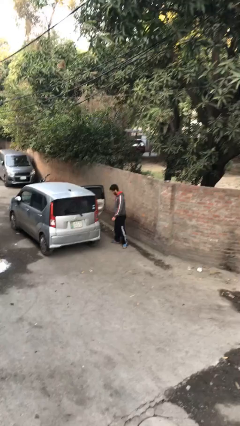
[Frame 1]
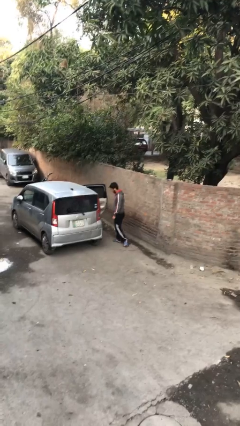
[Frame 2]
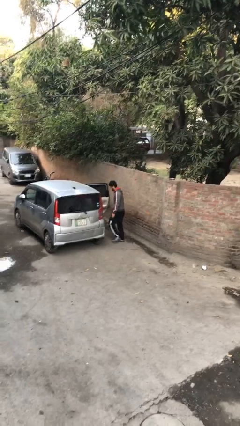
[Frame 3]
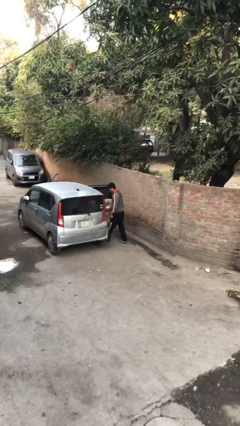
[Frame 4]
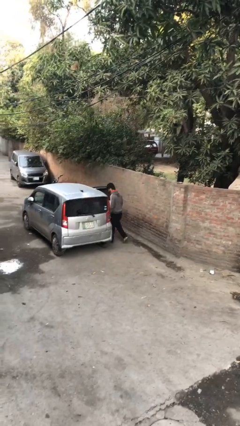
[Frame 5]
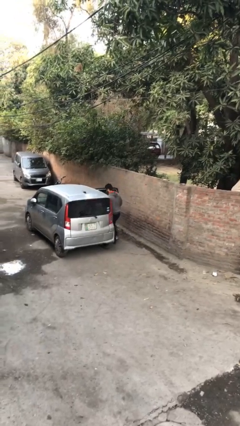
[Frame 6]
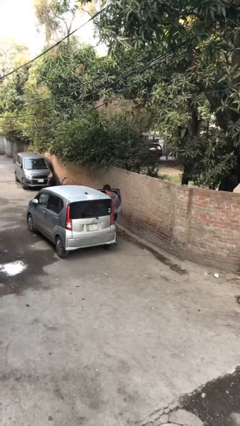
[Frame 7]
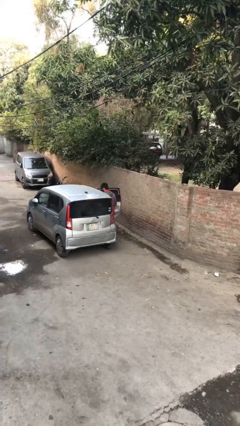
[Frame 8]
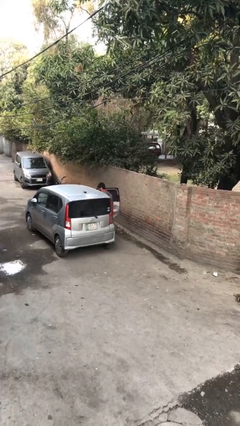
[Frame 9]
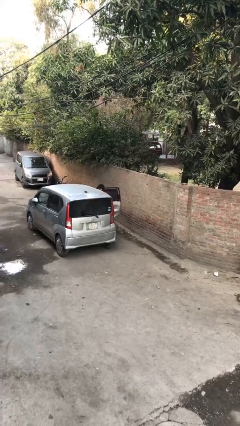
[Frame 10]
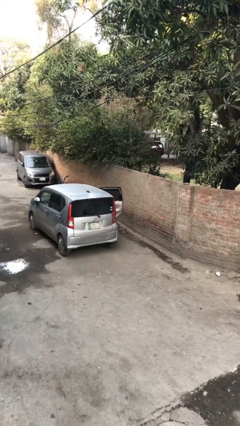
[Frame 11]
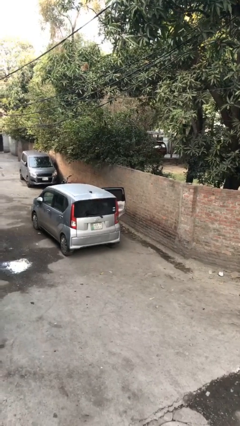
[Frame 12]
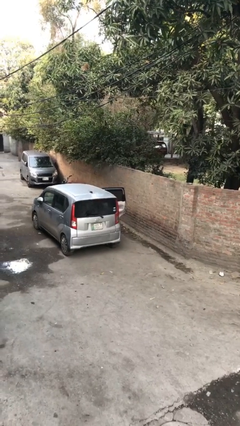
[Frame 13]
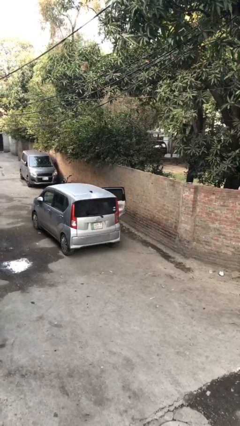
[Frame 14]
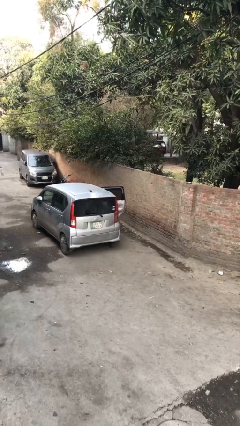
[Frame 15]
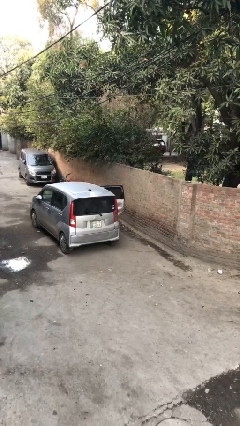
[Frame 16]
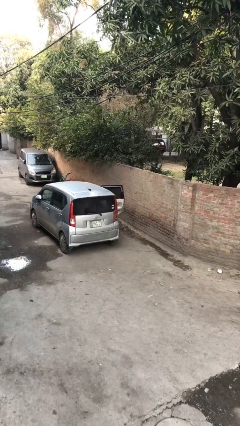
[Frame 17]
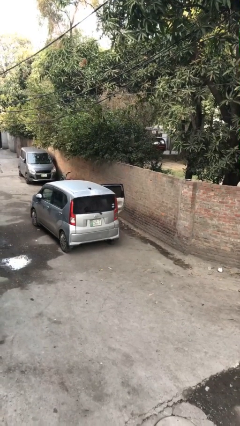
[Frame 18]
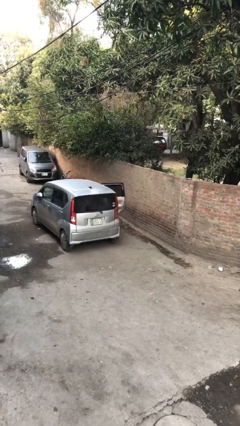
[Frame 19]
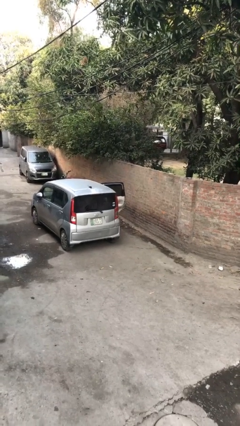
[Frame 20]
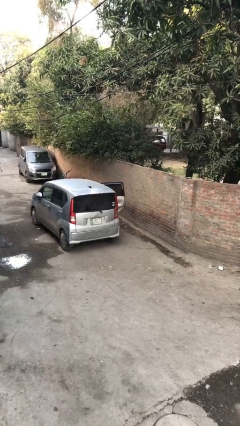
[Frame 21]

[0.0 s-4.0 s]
person enters car

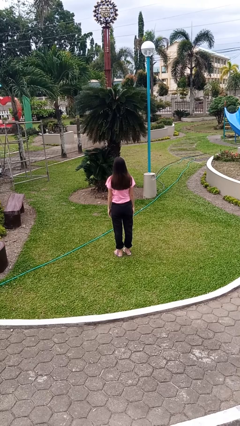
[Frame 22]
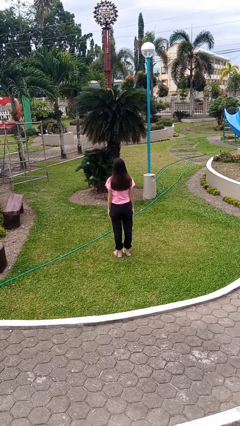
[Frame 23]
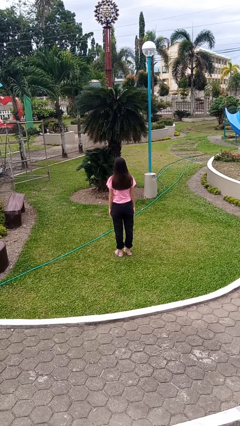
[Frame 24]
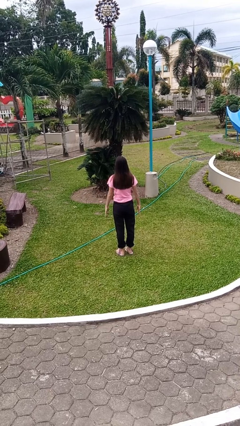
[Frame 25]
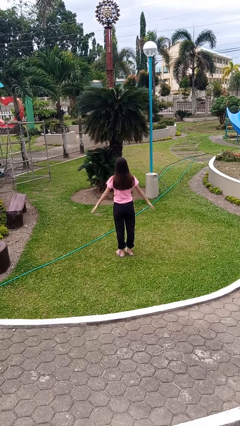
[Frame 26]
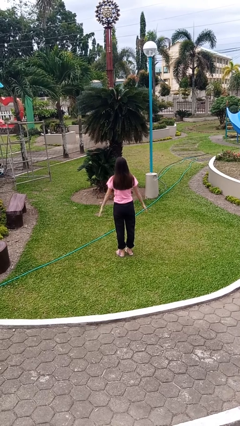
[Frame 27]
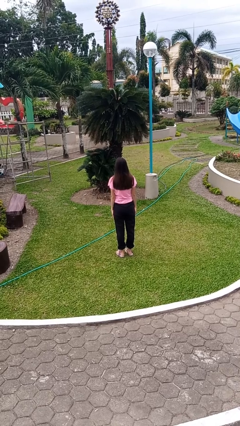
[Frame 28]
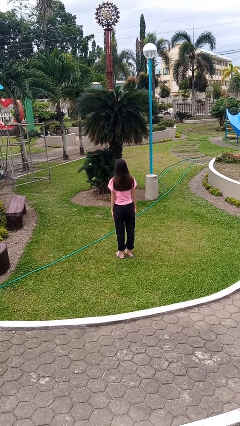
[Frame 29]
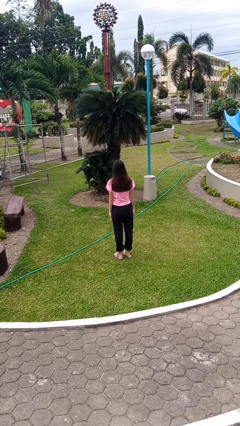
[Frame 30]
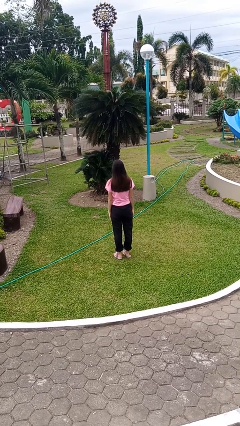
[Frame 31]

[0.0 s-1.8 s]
person slaps hands on thighs

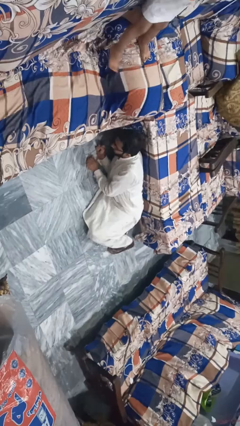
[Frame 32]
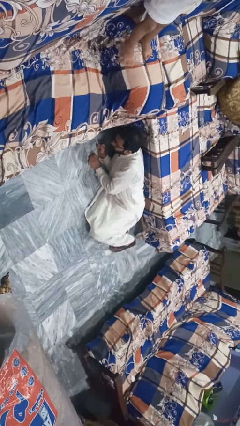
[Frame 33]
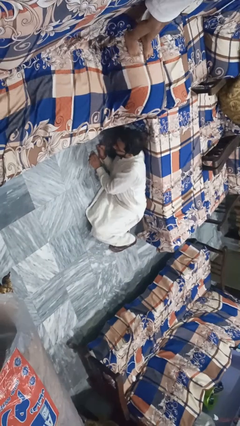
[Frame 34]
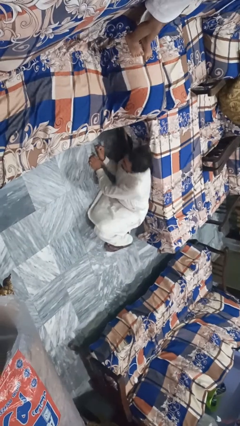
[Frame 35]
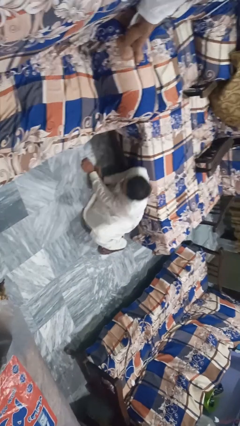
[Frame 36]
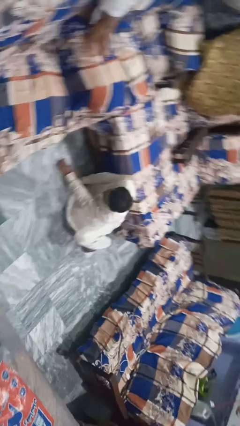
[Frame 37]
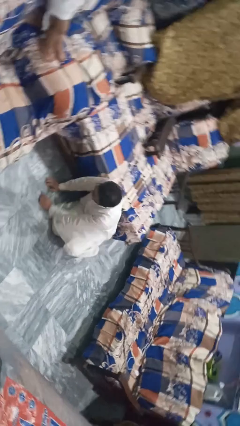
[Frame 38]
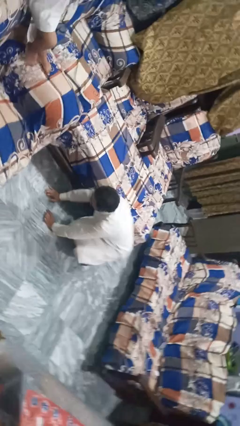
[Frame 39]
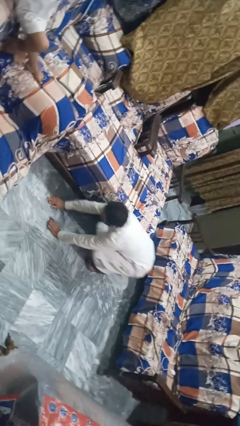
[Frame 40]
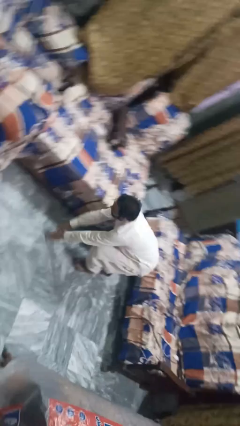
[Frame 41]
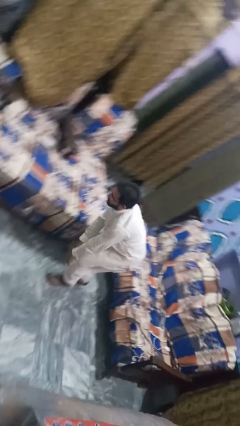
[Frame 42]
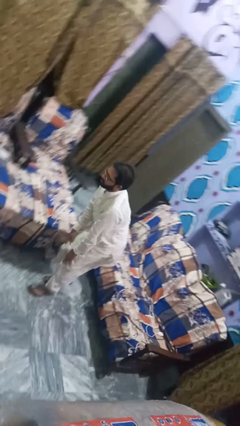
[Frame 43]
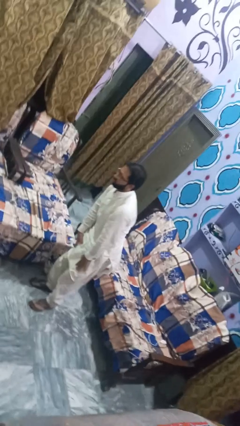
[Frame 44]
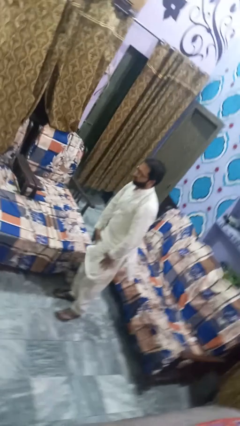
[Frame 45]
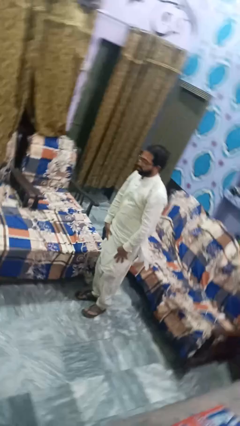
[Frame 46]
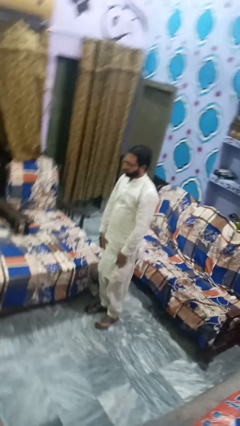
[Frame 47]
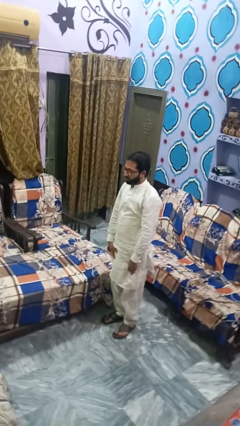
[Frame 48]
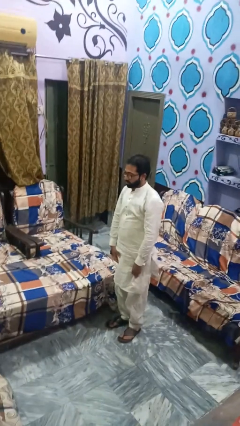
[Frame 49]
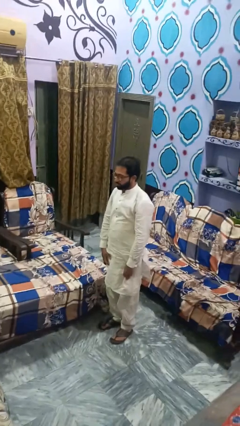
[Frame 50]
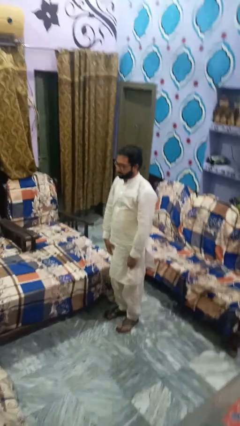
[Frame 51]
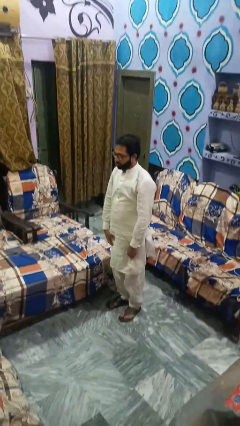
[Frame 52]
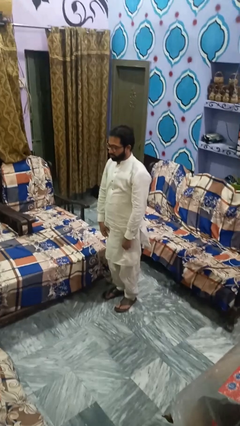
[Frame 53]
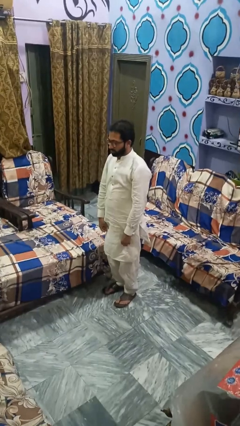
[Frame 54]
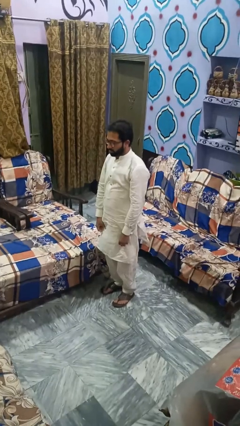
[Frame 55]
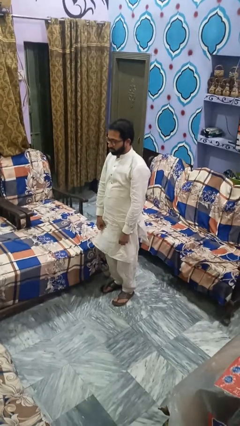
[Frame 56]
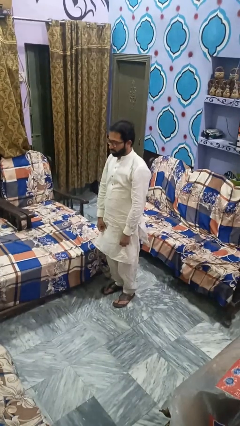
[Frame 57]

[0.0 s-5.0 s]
person stands up from floor

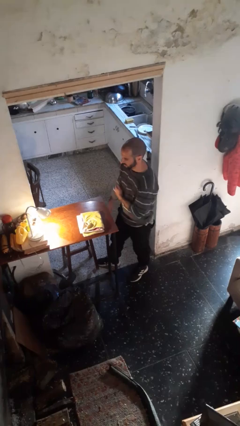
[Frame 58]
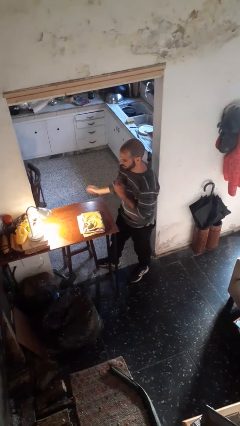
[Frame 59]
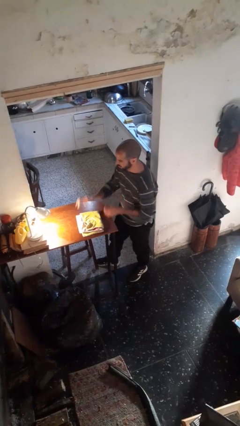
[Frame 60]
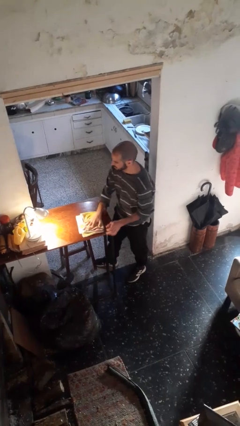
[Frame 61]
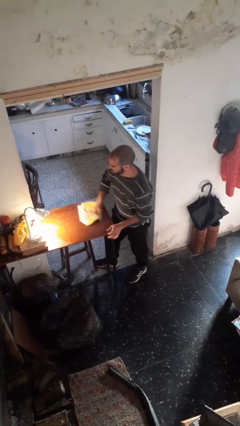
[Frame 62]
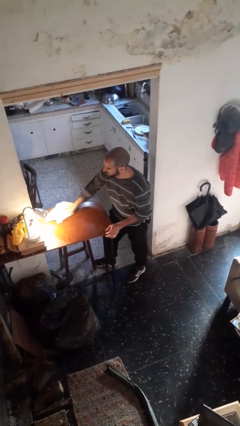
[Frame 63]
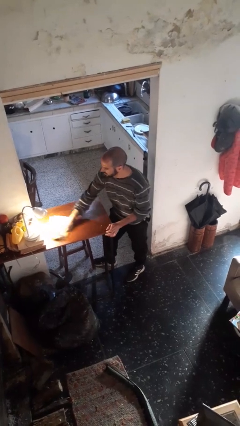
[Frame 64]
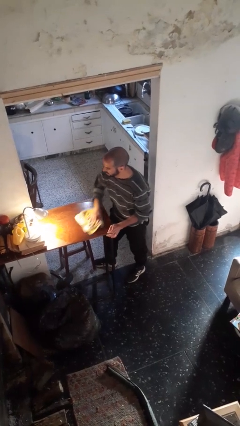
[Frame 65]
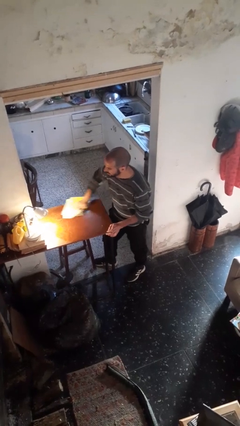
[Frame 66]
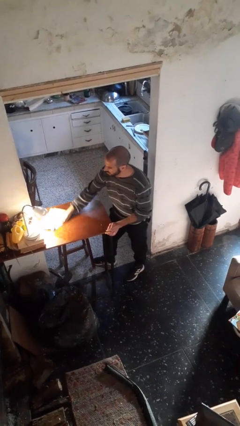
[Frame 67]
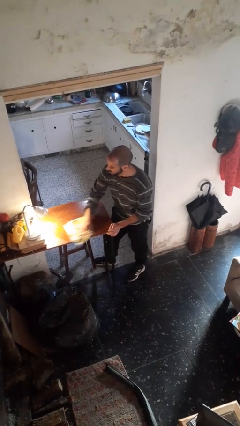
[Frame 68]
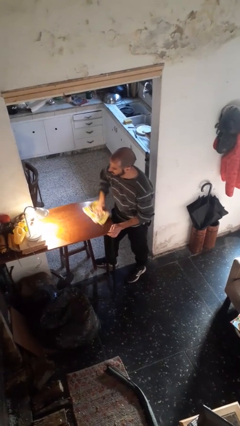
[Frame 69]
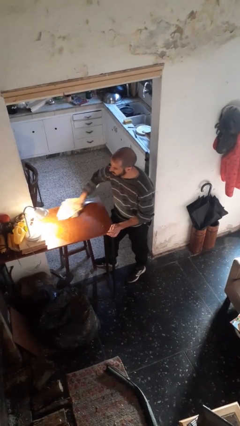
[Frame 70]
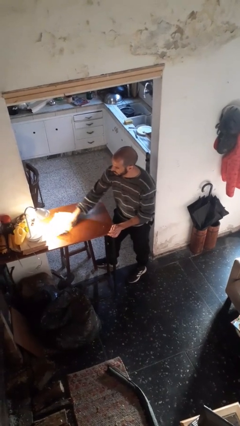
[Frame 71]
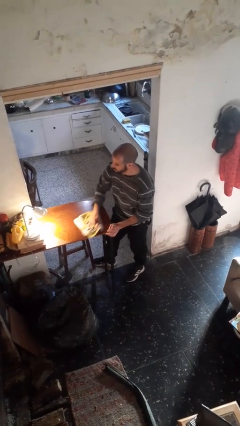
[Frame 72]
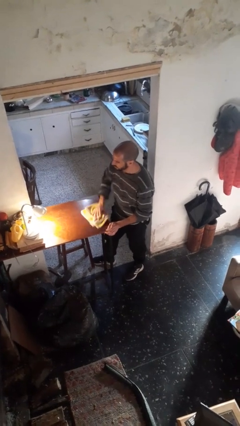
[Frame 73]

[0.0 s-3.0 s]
person cleans table with rag

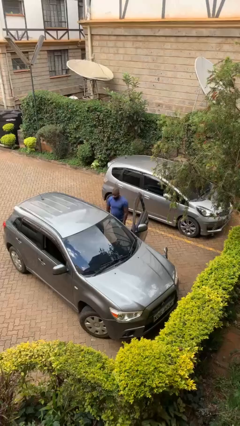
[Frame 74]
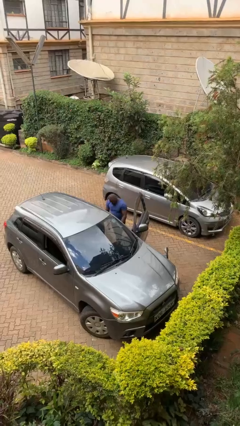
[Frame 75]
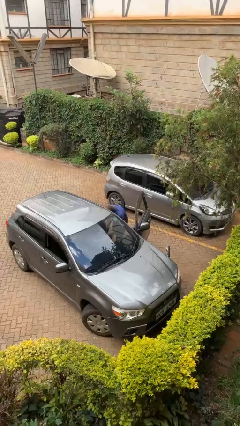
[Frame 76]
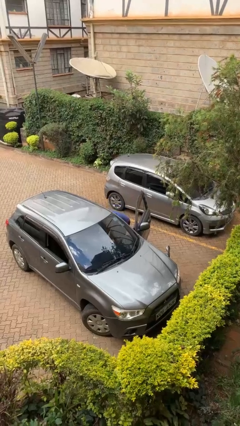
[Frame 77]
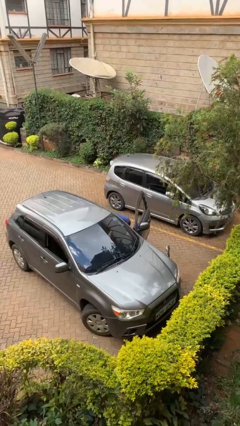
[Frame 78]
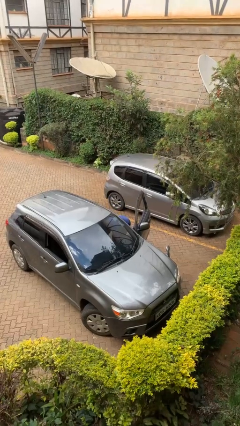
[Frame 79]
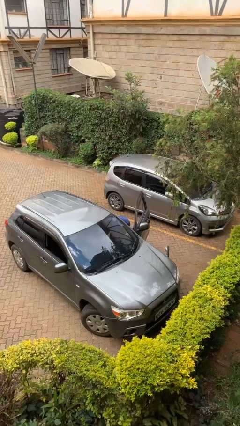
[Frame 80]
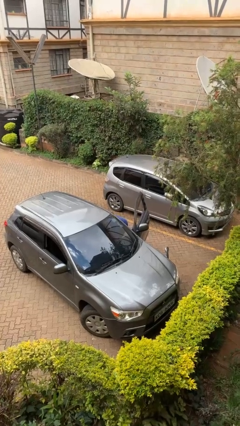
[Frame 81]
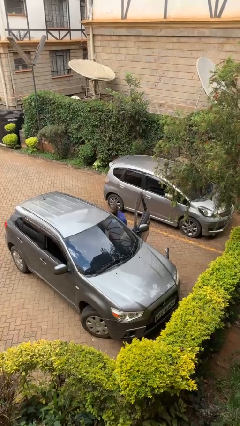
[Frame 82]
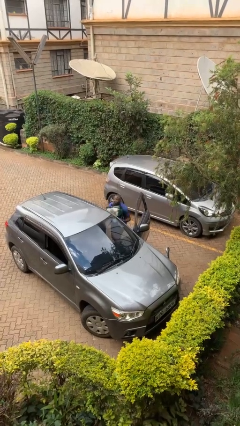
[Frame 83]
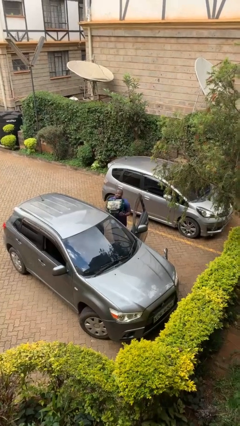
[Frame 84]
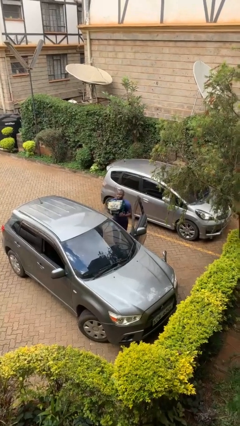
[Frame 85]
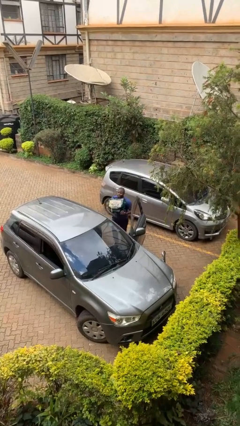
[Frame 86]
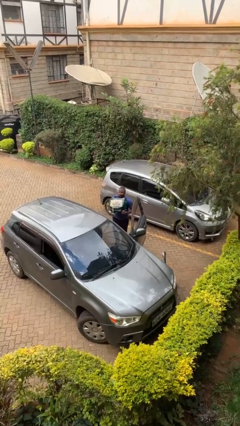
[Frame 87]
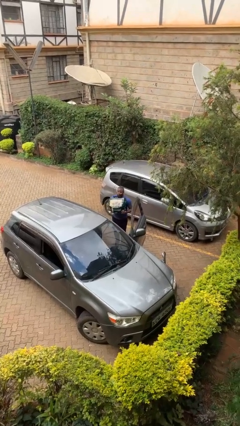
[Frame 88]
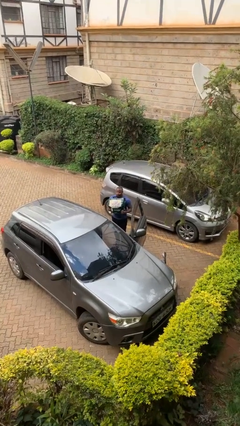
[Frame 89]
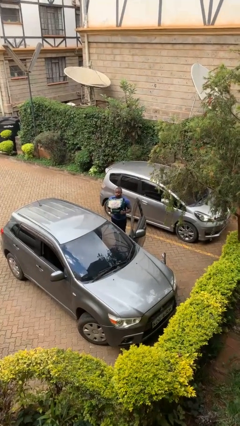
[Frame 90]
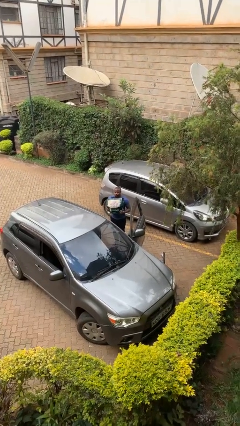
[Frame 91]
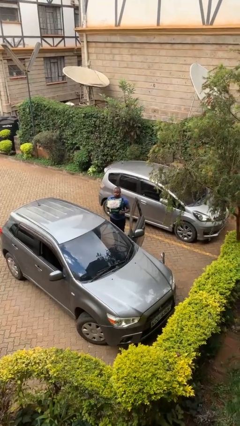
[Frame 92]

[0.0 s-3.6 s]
person unloads car

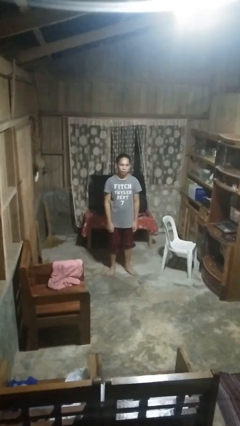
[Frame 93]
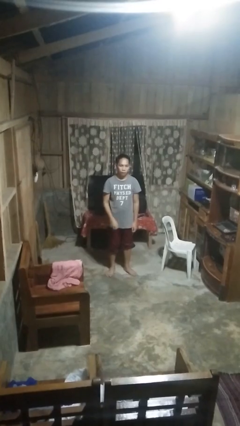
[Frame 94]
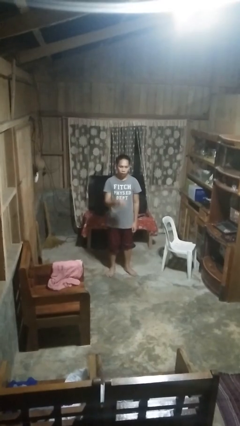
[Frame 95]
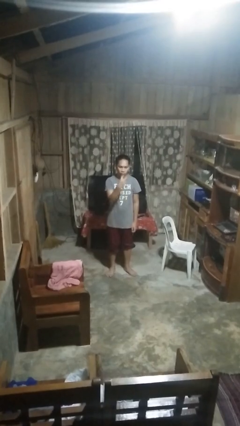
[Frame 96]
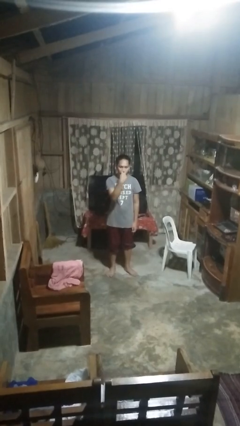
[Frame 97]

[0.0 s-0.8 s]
person gestures watch closely
